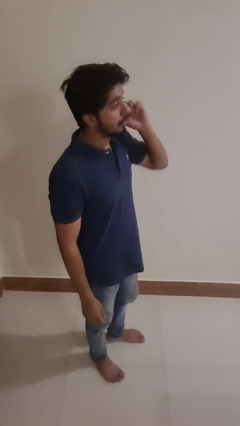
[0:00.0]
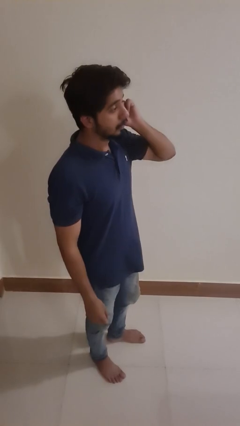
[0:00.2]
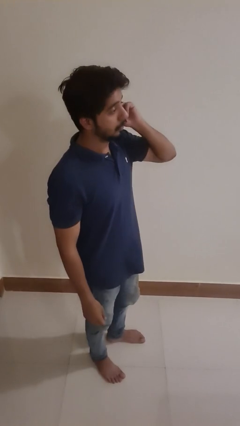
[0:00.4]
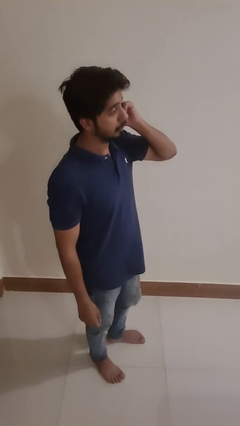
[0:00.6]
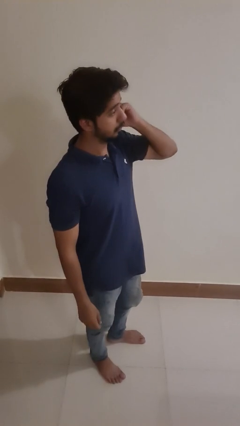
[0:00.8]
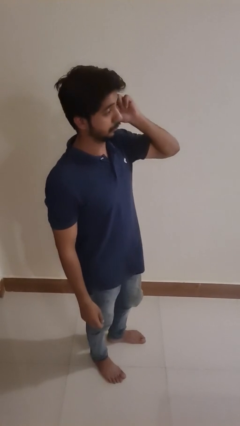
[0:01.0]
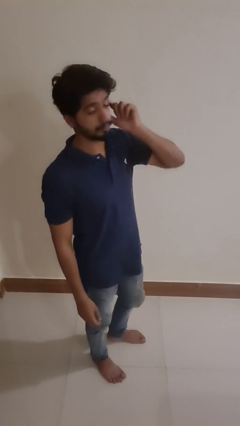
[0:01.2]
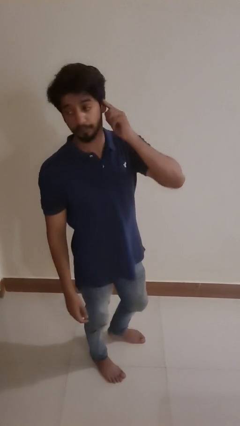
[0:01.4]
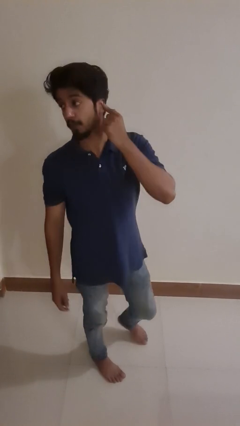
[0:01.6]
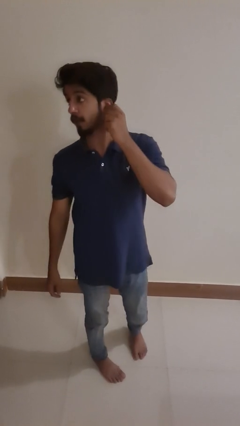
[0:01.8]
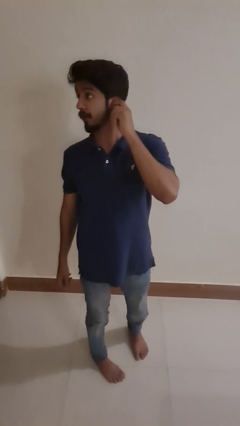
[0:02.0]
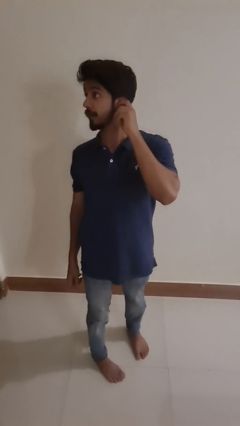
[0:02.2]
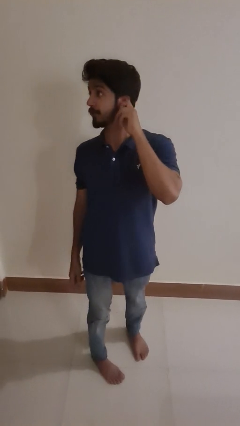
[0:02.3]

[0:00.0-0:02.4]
person touches earlobe

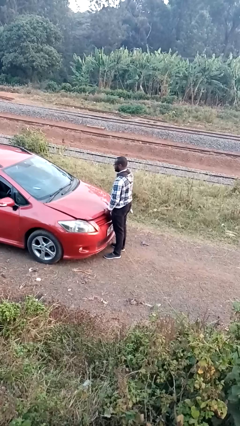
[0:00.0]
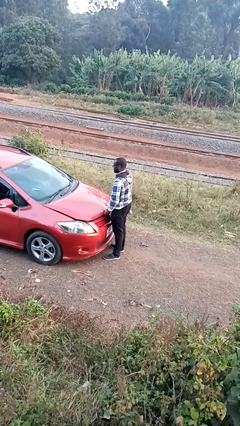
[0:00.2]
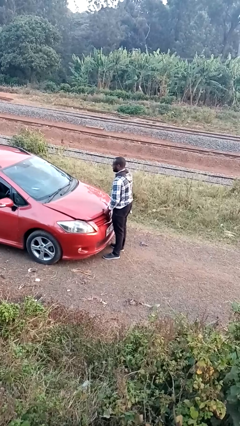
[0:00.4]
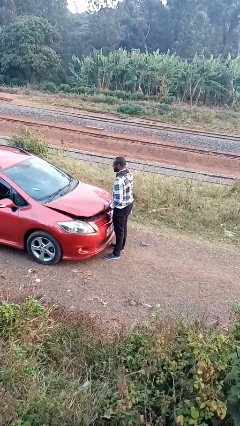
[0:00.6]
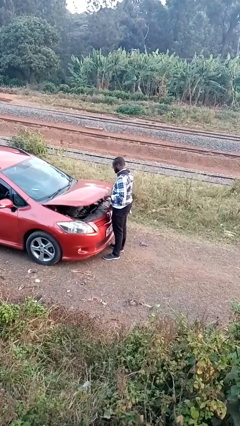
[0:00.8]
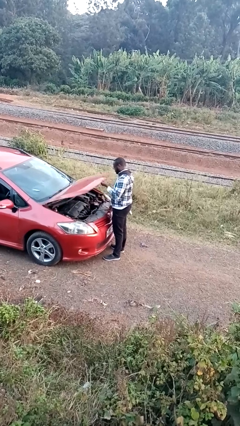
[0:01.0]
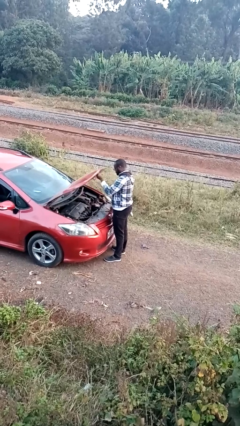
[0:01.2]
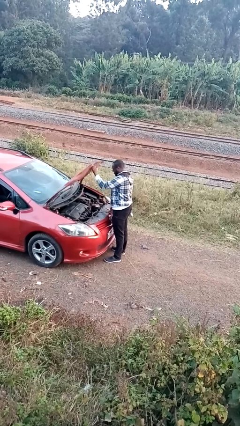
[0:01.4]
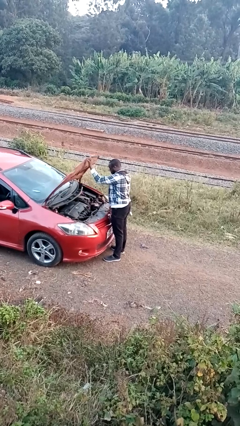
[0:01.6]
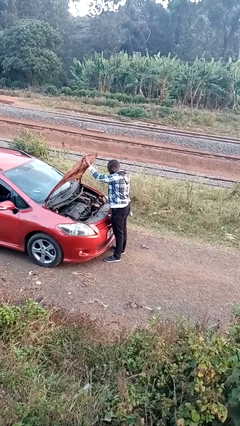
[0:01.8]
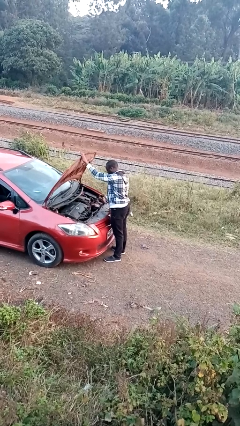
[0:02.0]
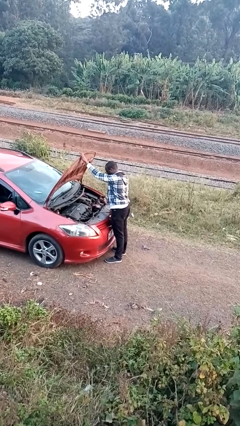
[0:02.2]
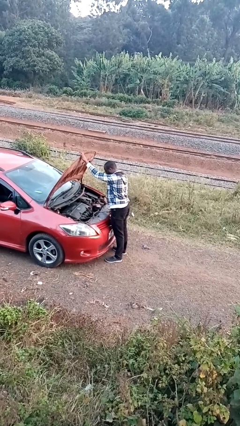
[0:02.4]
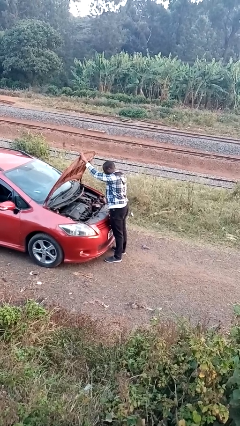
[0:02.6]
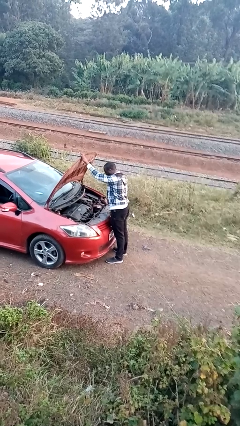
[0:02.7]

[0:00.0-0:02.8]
person opens car hood

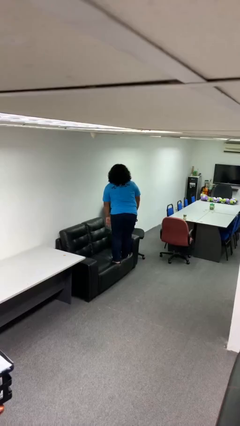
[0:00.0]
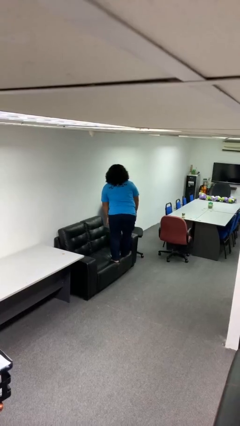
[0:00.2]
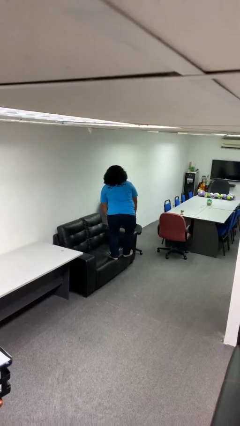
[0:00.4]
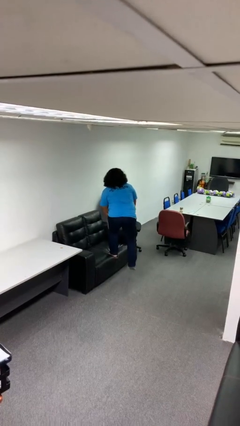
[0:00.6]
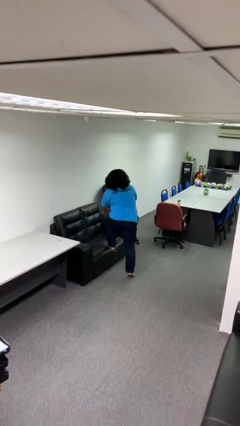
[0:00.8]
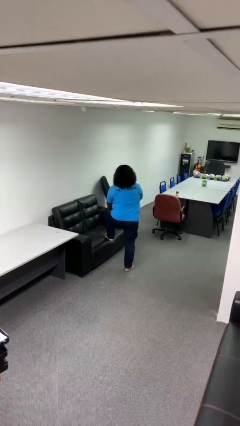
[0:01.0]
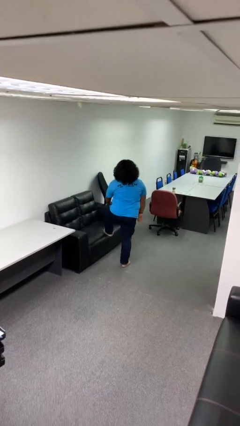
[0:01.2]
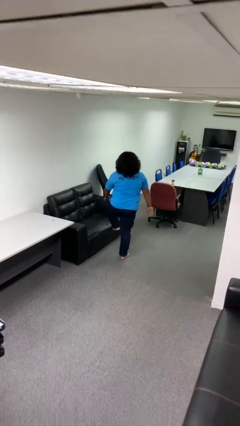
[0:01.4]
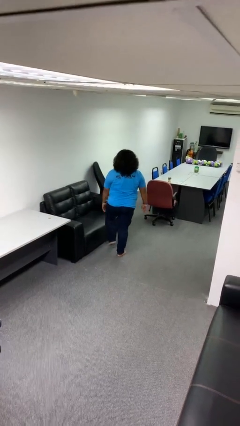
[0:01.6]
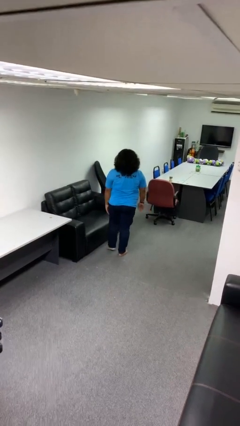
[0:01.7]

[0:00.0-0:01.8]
person climbs off couch

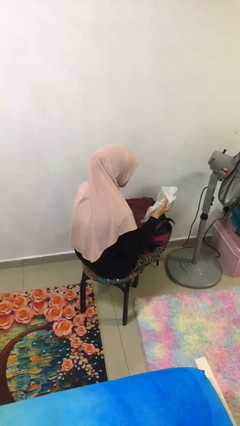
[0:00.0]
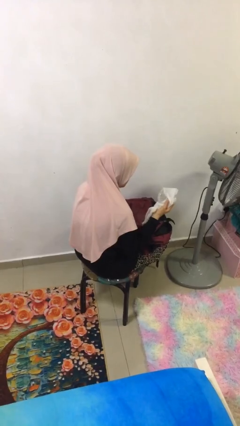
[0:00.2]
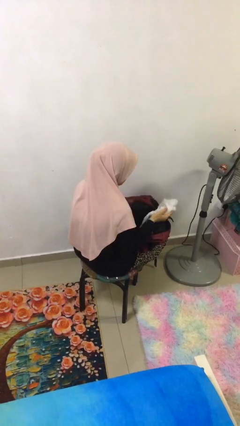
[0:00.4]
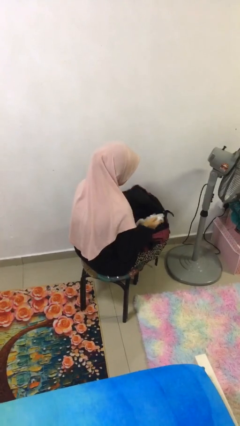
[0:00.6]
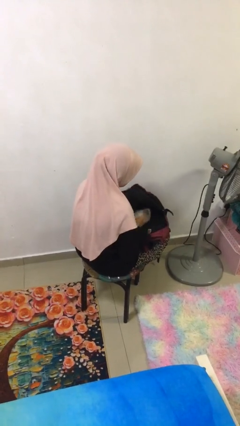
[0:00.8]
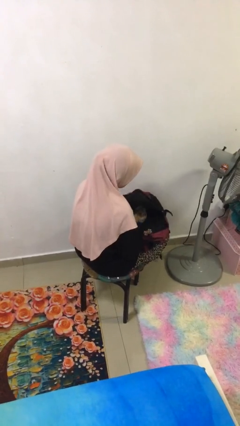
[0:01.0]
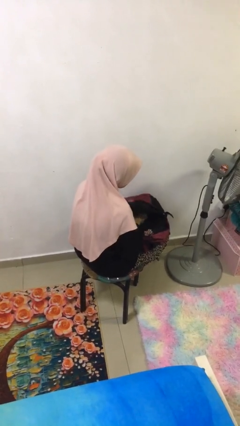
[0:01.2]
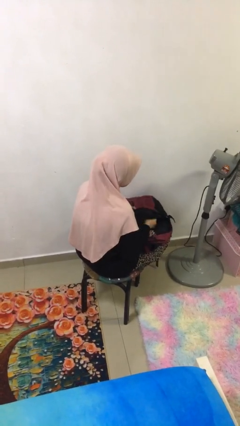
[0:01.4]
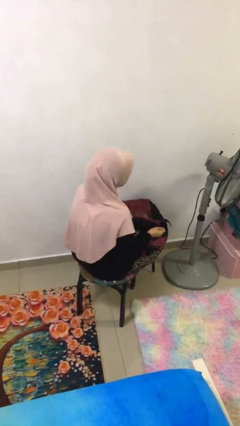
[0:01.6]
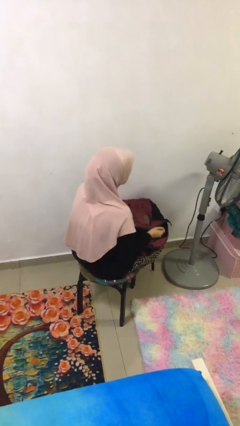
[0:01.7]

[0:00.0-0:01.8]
person puts object into backpack

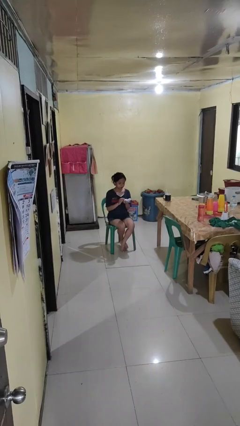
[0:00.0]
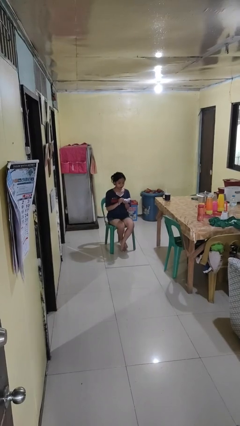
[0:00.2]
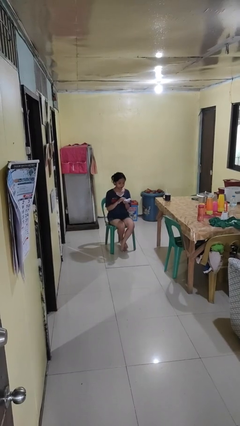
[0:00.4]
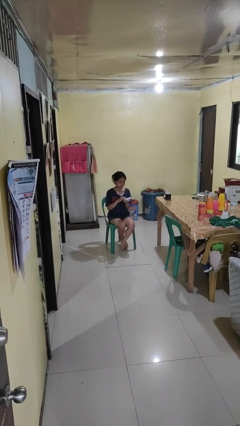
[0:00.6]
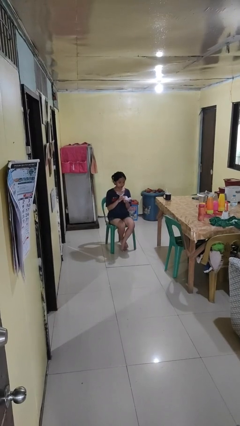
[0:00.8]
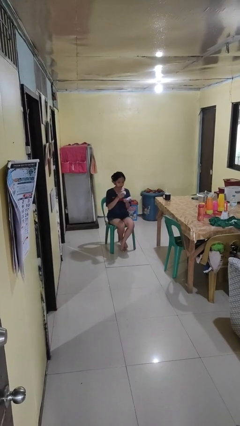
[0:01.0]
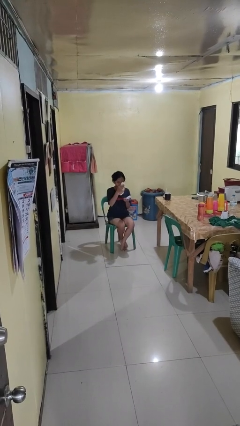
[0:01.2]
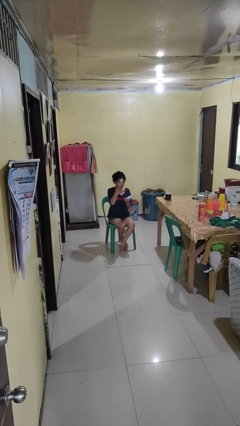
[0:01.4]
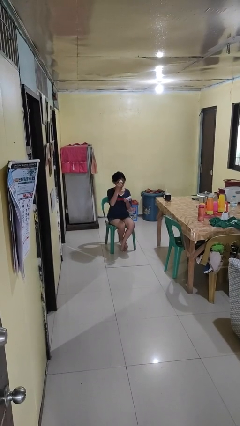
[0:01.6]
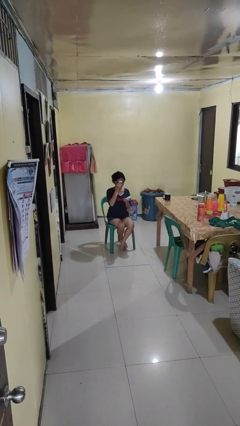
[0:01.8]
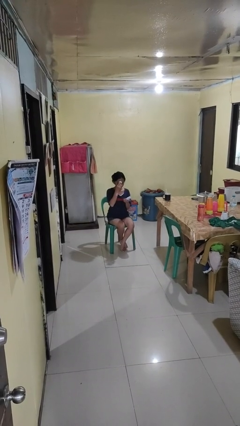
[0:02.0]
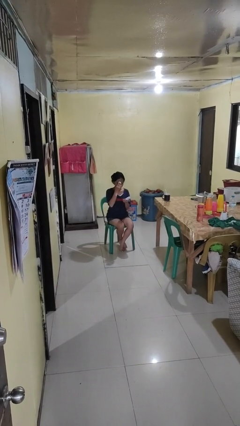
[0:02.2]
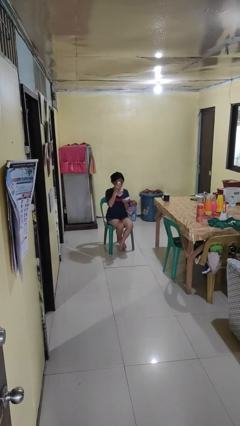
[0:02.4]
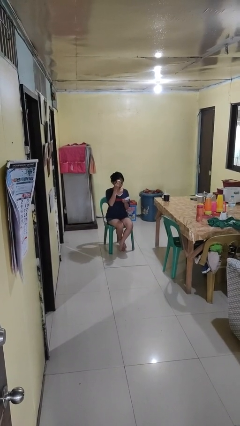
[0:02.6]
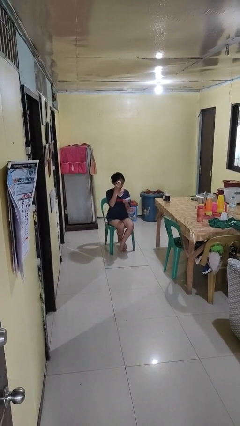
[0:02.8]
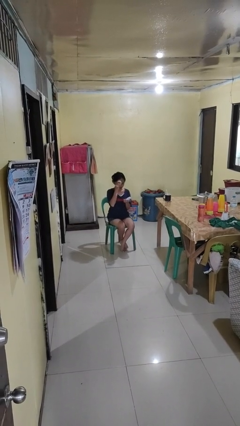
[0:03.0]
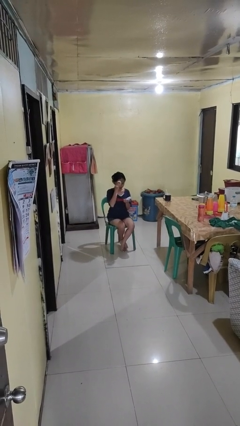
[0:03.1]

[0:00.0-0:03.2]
person applies foundation makeup

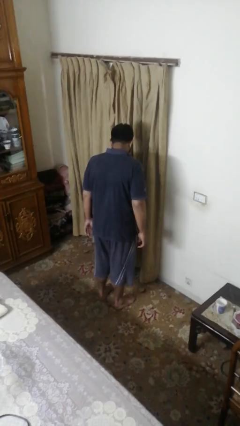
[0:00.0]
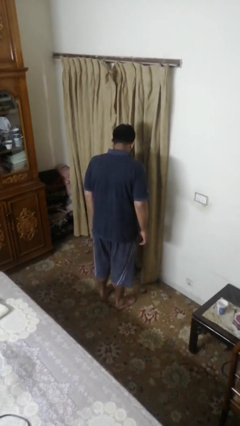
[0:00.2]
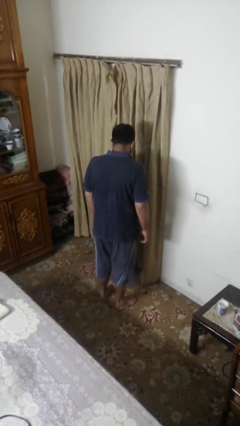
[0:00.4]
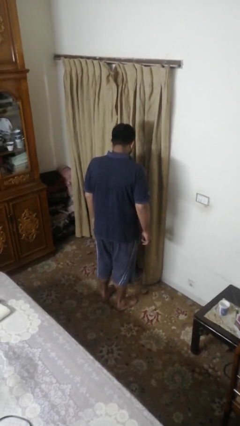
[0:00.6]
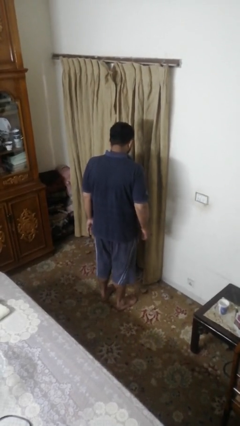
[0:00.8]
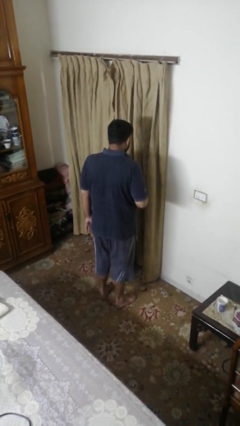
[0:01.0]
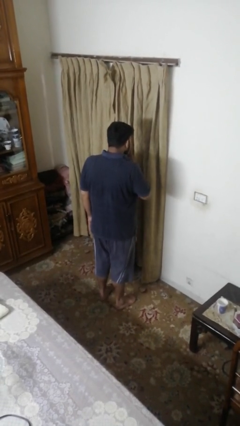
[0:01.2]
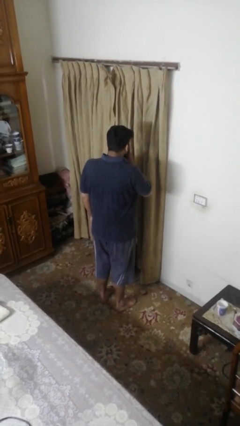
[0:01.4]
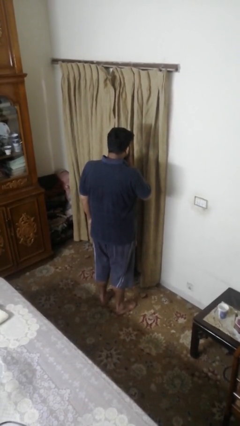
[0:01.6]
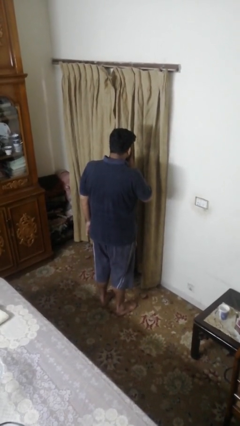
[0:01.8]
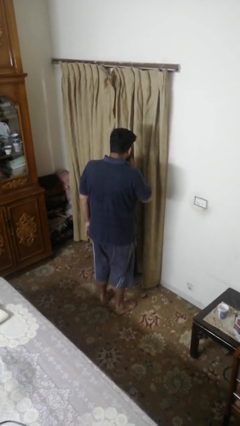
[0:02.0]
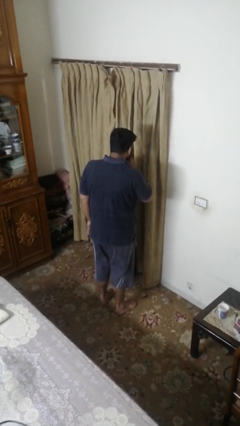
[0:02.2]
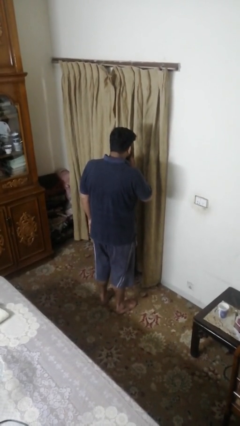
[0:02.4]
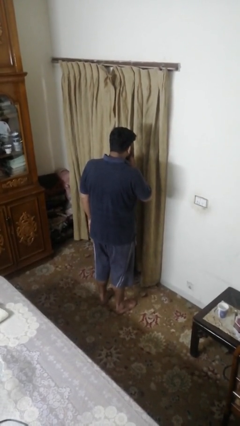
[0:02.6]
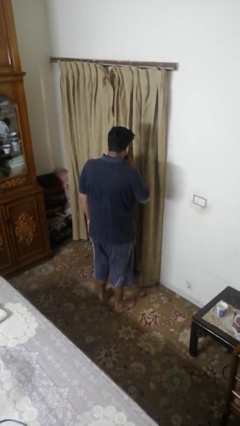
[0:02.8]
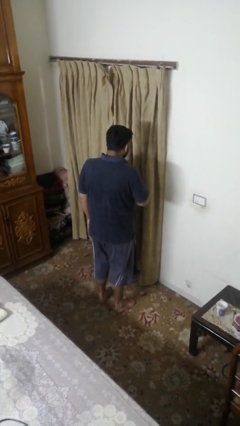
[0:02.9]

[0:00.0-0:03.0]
person gestures be quiet

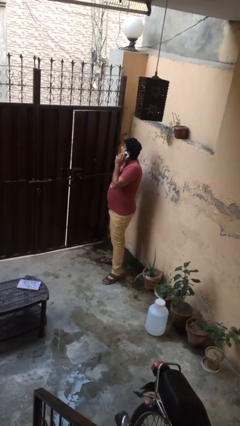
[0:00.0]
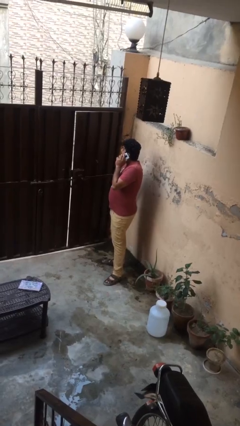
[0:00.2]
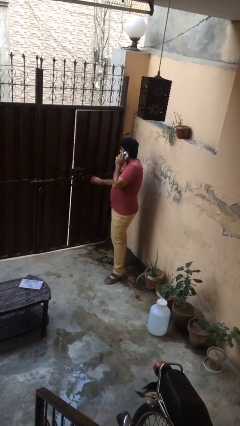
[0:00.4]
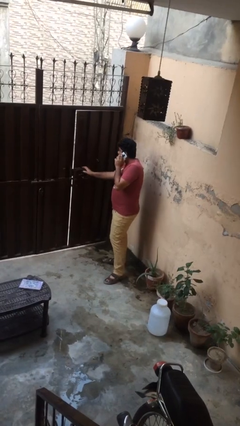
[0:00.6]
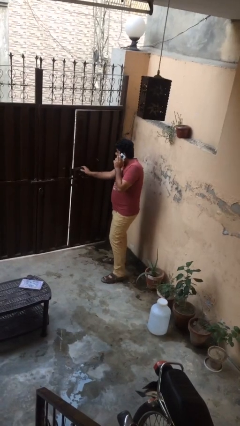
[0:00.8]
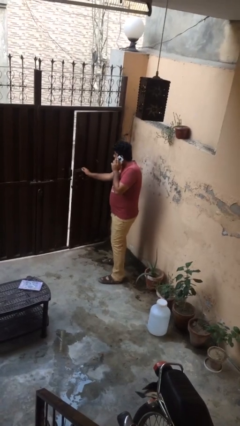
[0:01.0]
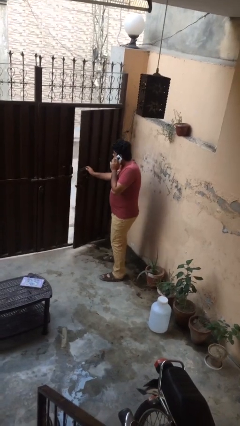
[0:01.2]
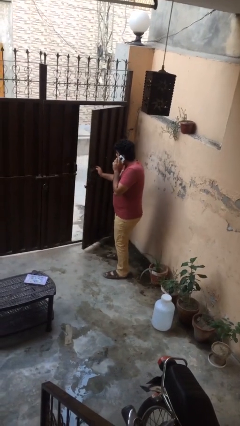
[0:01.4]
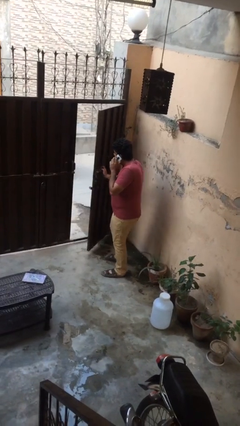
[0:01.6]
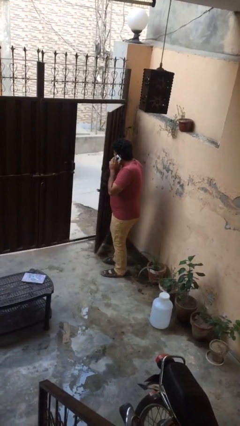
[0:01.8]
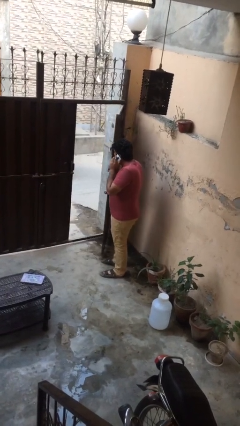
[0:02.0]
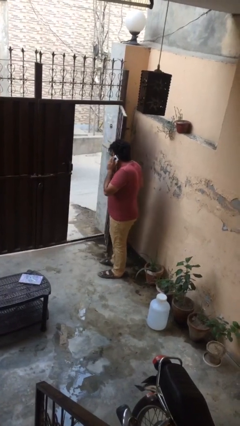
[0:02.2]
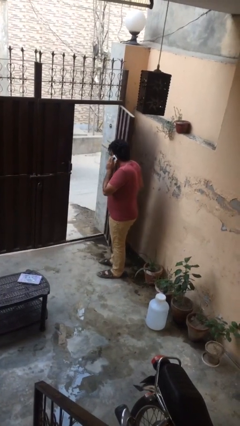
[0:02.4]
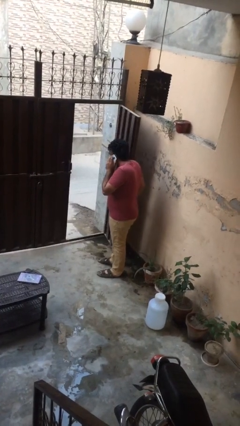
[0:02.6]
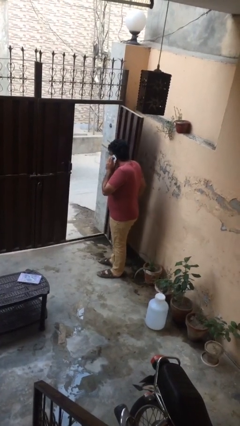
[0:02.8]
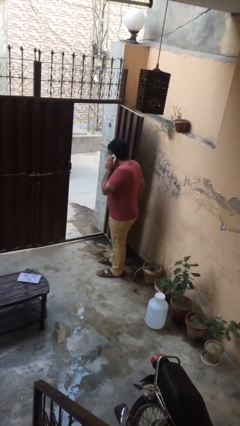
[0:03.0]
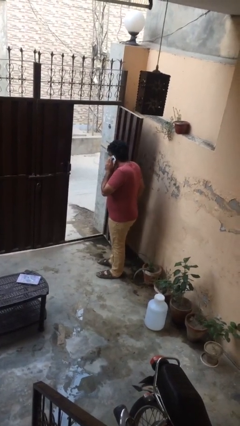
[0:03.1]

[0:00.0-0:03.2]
person opens facility door
